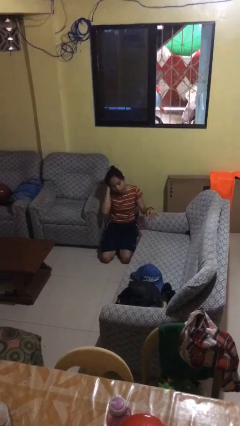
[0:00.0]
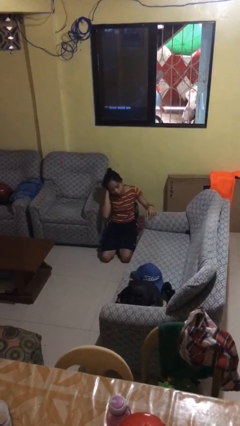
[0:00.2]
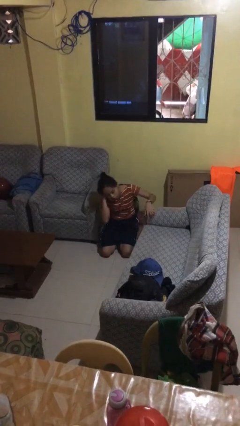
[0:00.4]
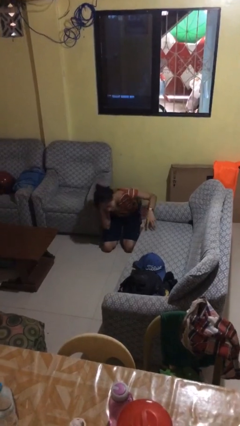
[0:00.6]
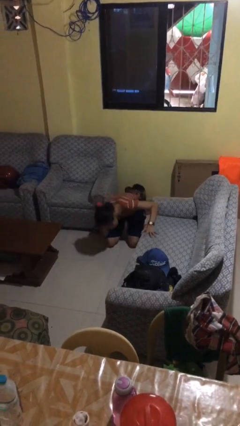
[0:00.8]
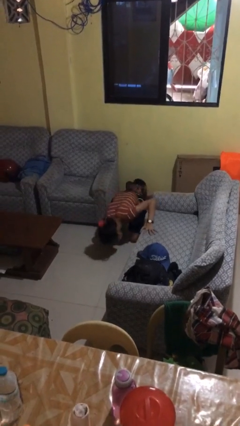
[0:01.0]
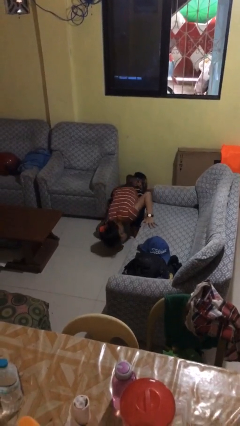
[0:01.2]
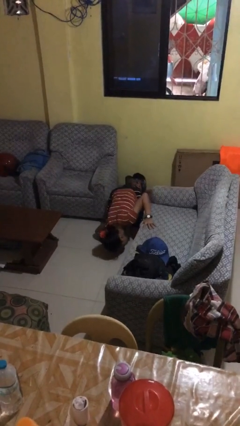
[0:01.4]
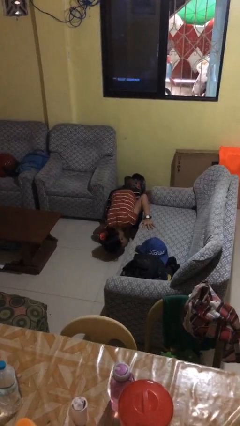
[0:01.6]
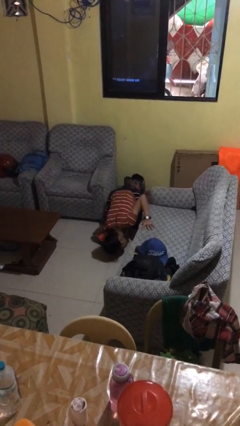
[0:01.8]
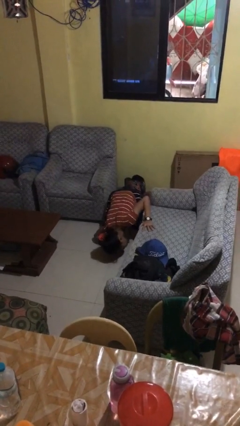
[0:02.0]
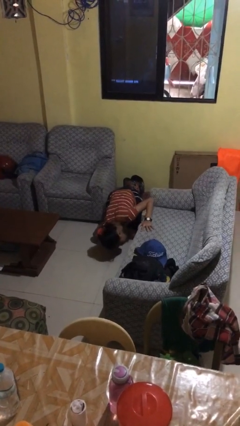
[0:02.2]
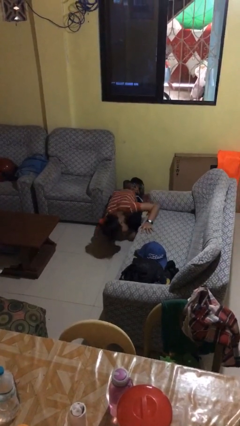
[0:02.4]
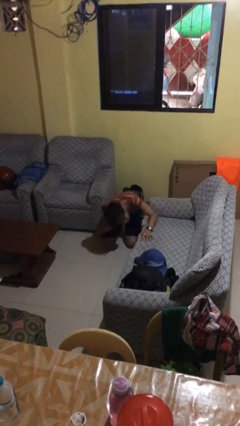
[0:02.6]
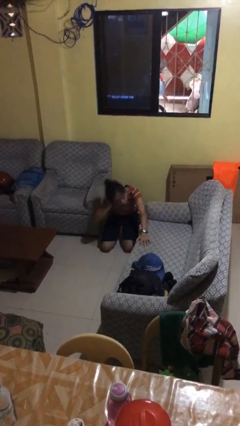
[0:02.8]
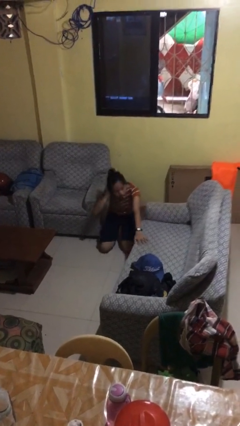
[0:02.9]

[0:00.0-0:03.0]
person searches under couch

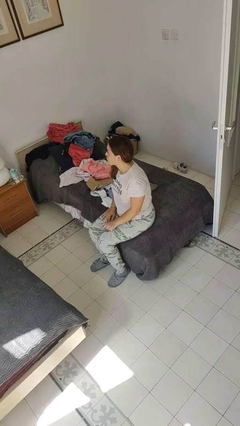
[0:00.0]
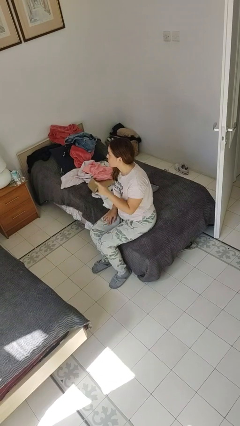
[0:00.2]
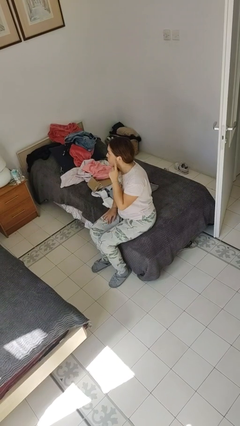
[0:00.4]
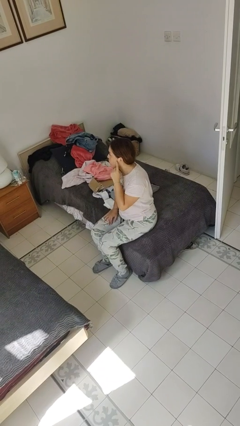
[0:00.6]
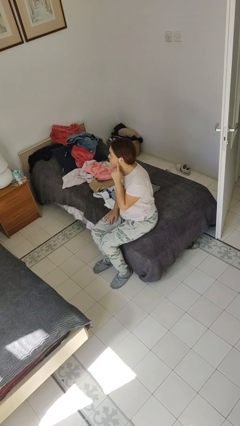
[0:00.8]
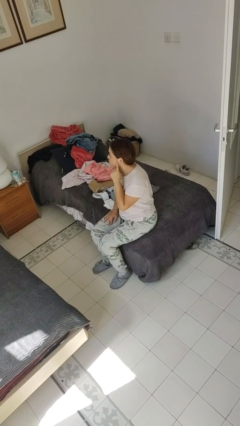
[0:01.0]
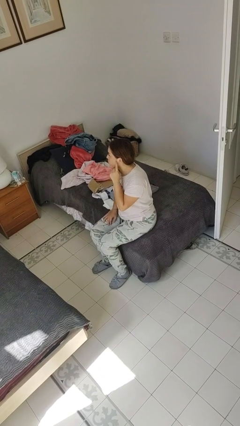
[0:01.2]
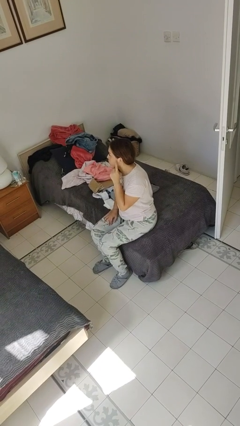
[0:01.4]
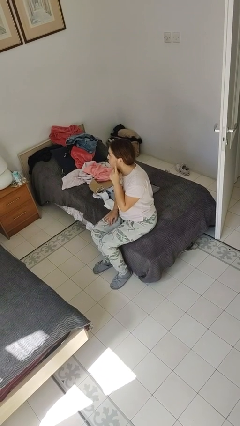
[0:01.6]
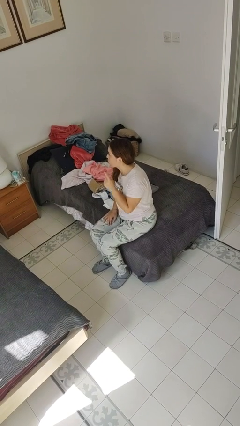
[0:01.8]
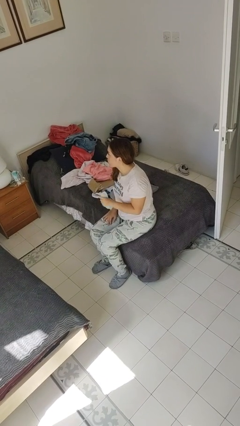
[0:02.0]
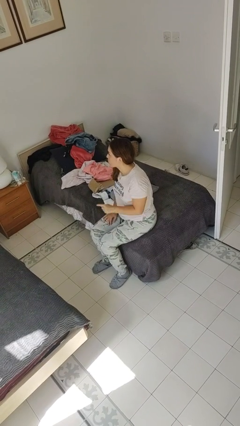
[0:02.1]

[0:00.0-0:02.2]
person gestures listen closely

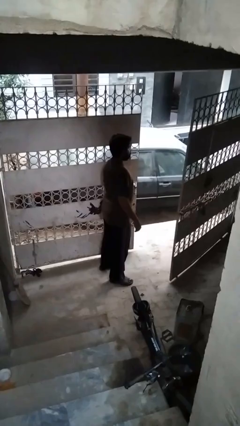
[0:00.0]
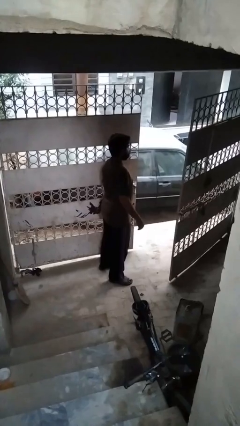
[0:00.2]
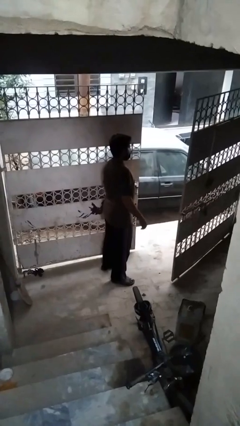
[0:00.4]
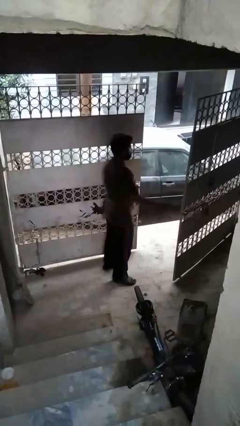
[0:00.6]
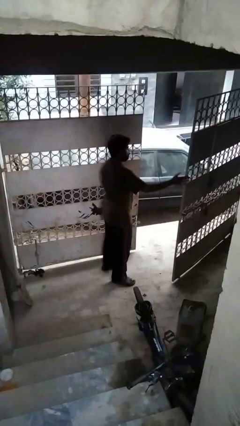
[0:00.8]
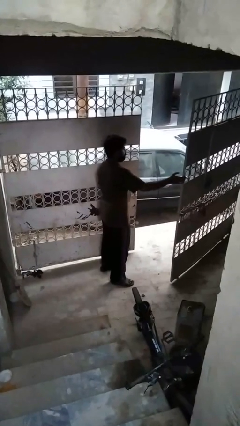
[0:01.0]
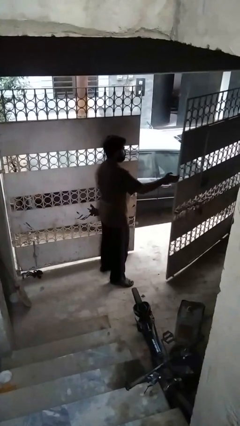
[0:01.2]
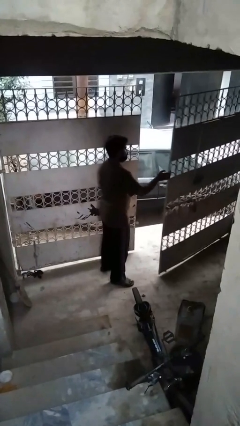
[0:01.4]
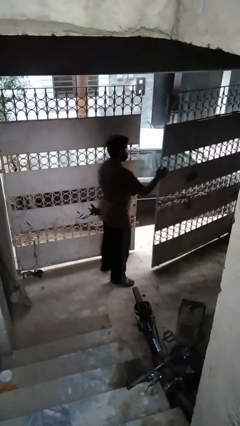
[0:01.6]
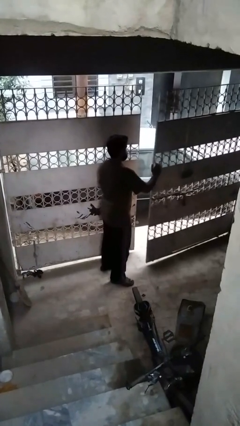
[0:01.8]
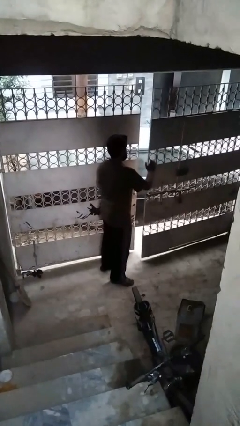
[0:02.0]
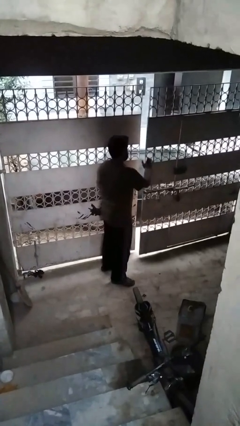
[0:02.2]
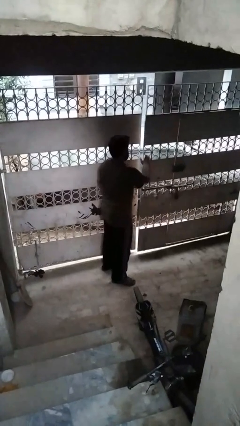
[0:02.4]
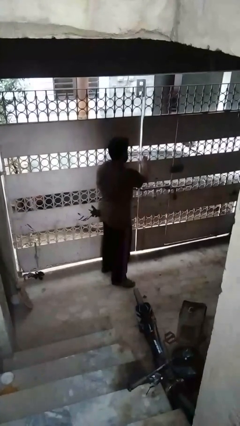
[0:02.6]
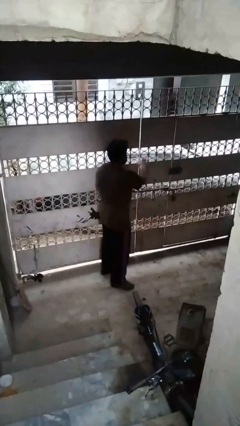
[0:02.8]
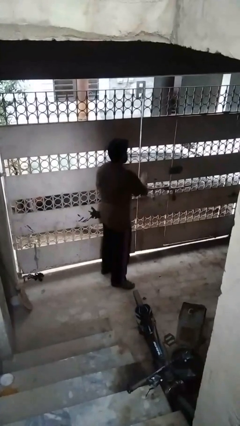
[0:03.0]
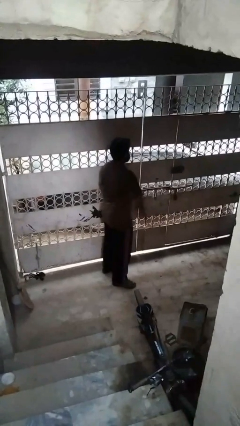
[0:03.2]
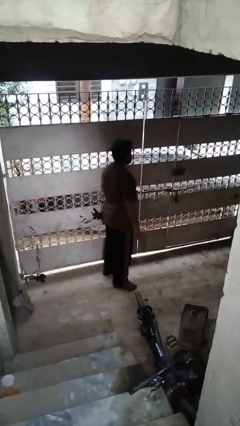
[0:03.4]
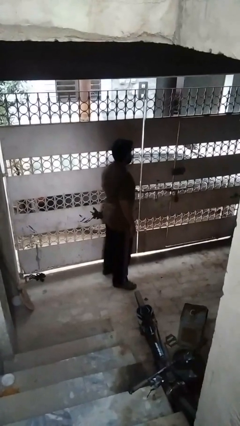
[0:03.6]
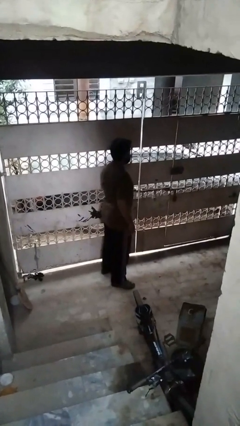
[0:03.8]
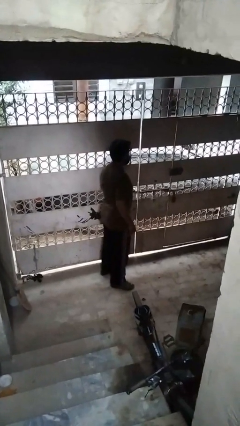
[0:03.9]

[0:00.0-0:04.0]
person closes gate

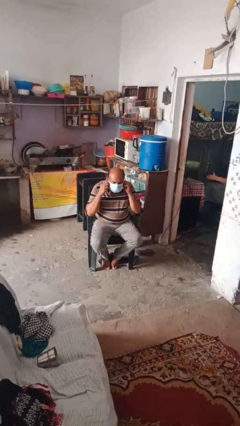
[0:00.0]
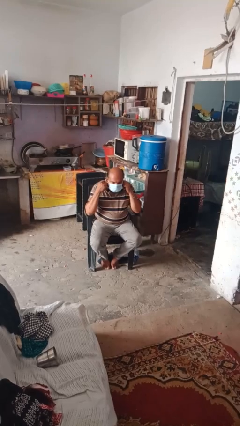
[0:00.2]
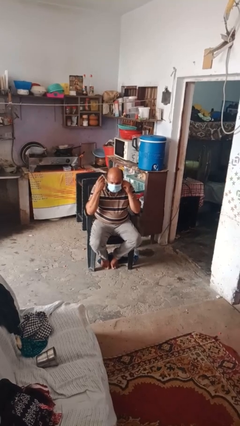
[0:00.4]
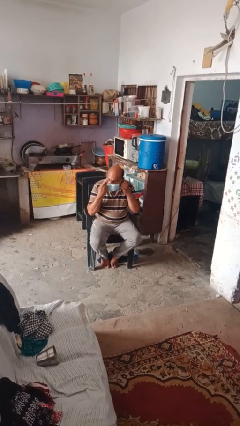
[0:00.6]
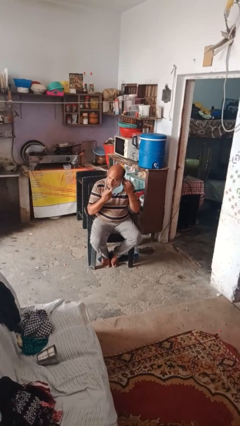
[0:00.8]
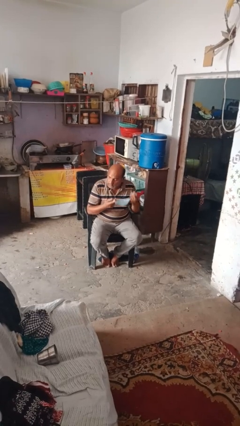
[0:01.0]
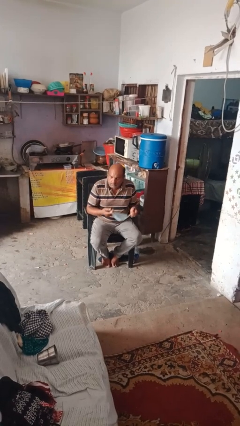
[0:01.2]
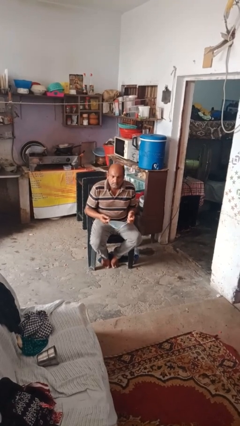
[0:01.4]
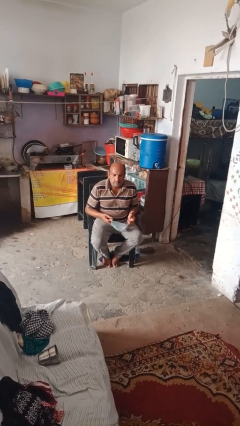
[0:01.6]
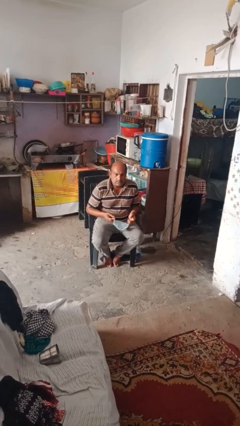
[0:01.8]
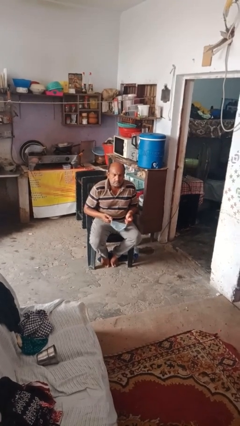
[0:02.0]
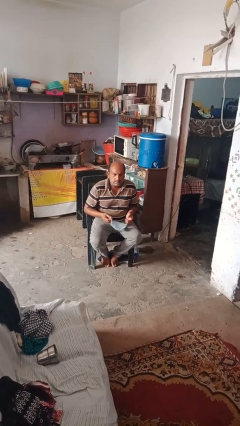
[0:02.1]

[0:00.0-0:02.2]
person takes off facemask

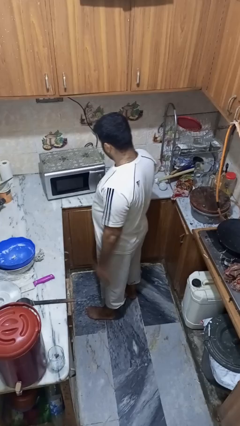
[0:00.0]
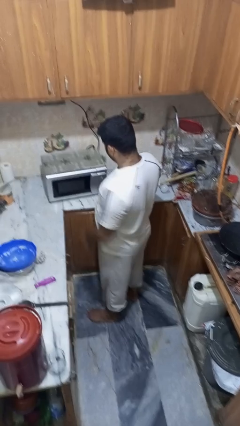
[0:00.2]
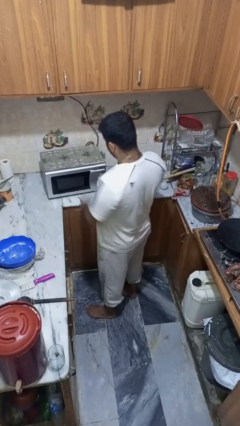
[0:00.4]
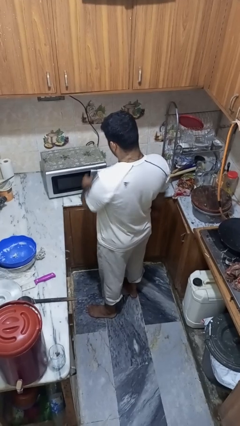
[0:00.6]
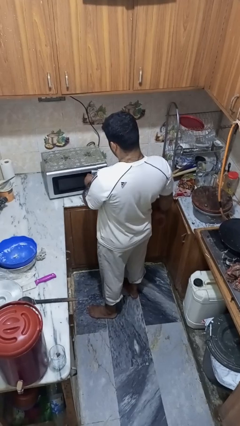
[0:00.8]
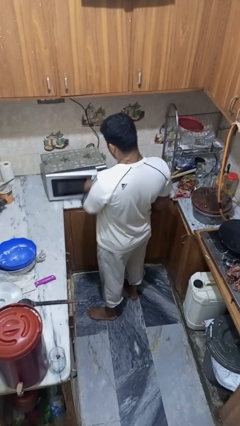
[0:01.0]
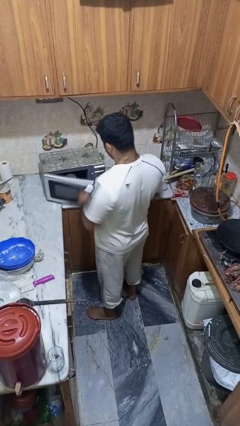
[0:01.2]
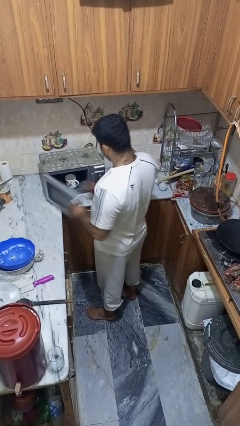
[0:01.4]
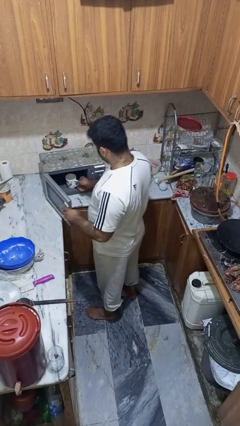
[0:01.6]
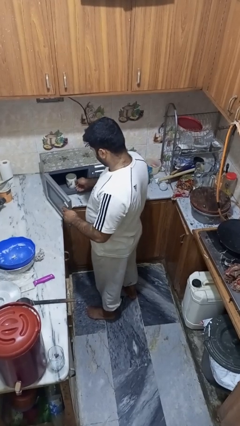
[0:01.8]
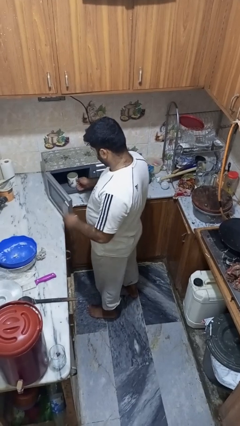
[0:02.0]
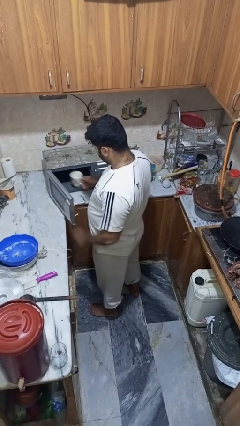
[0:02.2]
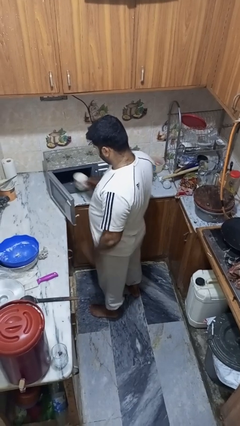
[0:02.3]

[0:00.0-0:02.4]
person takes object from microwave

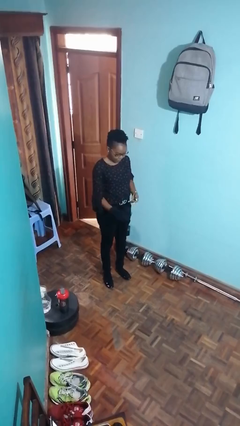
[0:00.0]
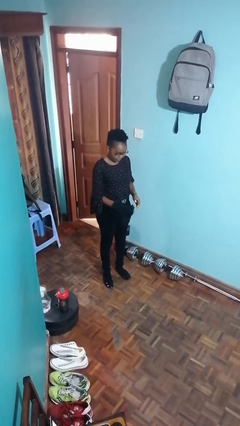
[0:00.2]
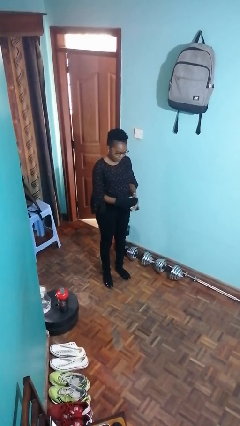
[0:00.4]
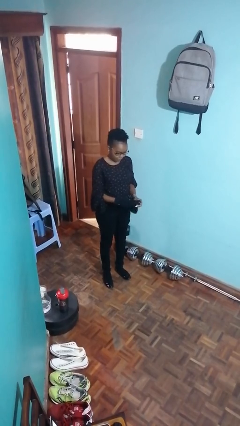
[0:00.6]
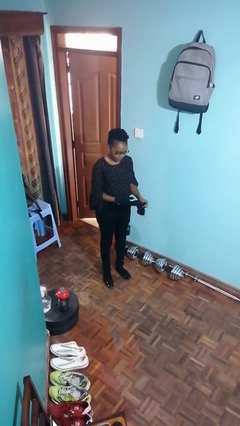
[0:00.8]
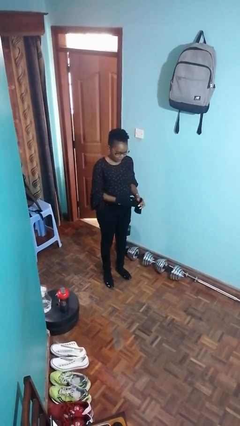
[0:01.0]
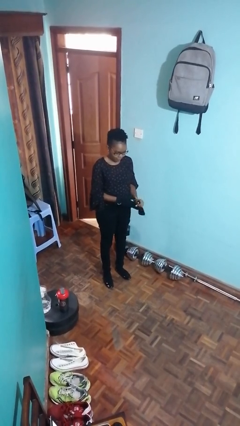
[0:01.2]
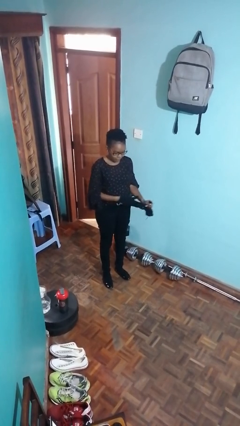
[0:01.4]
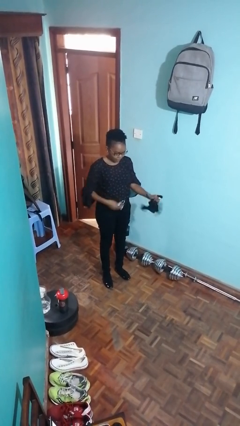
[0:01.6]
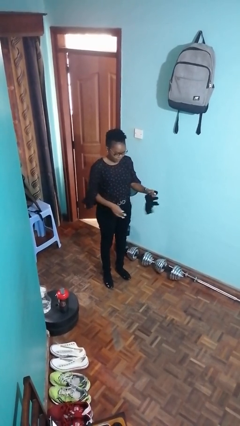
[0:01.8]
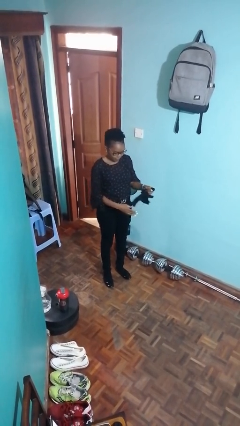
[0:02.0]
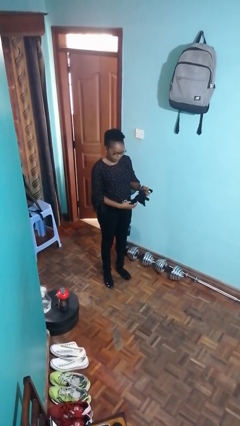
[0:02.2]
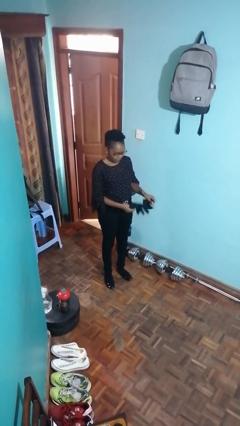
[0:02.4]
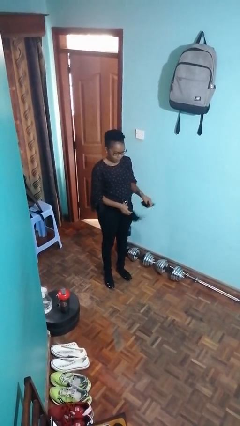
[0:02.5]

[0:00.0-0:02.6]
person takes off gloves

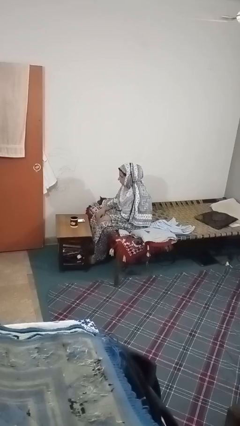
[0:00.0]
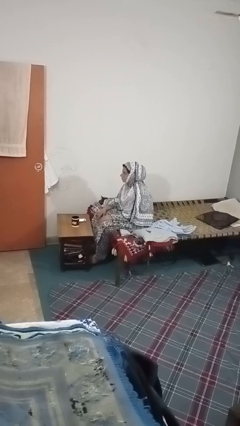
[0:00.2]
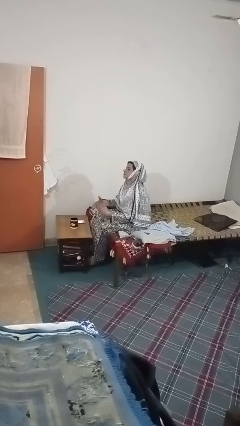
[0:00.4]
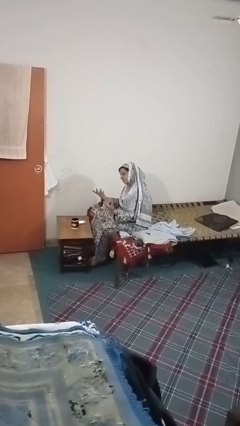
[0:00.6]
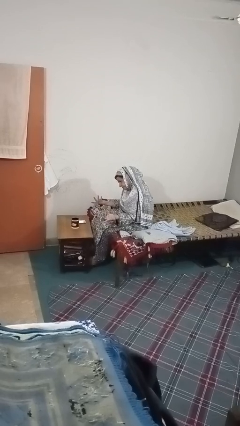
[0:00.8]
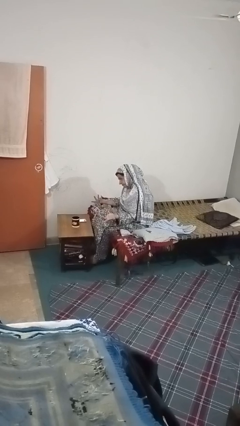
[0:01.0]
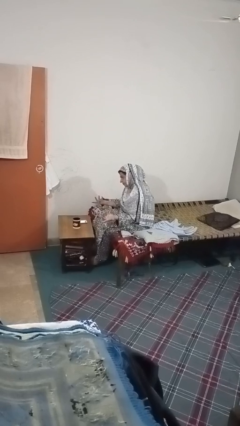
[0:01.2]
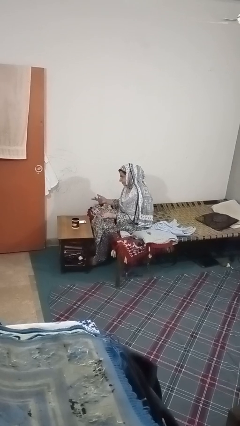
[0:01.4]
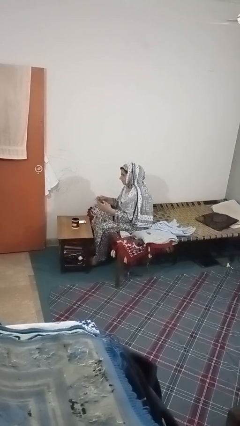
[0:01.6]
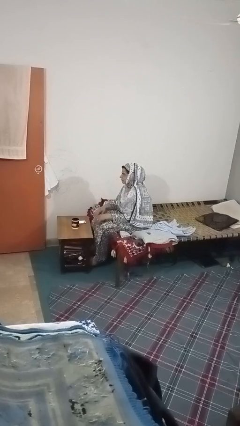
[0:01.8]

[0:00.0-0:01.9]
person shrugs
